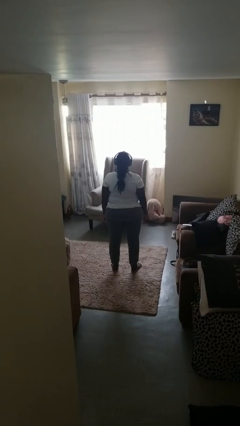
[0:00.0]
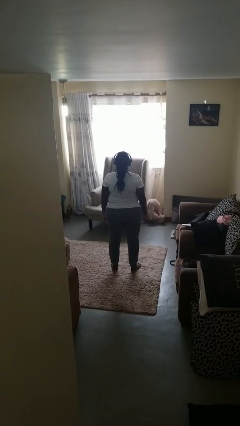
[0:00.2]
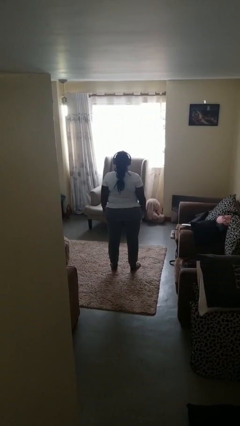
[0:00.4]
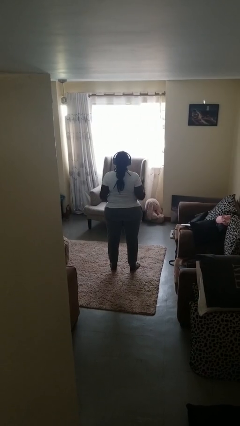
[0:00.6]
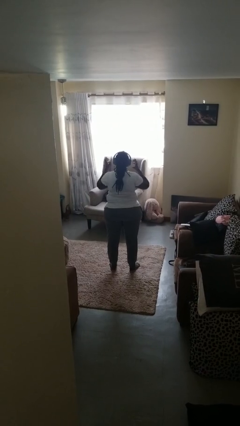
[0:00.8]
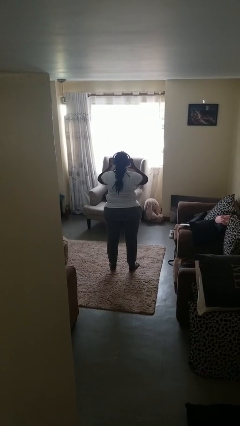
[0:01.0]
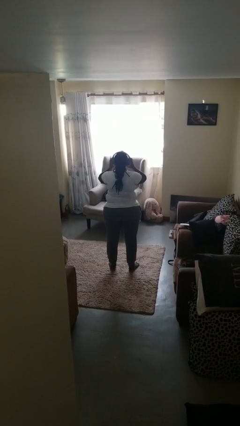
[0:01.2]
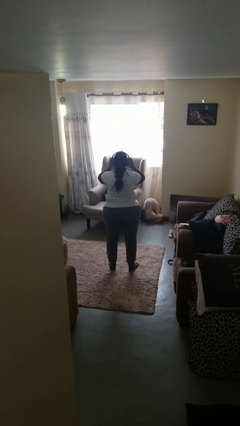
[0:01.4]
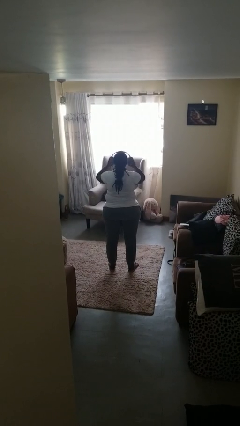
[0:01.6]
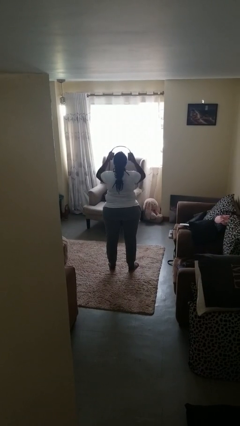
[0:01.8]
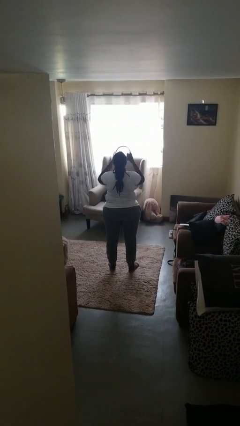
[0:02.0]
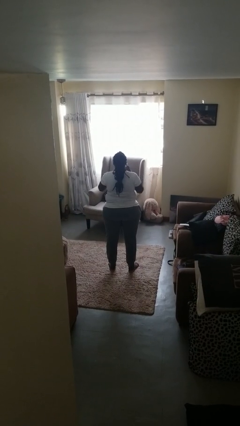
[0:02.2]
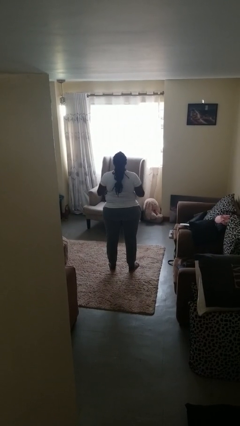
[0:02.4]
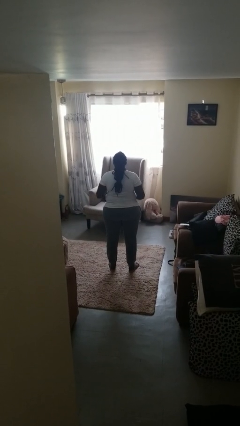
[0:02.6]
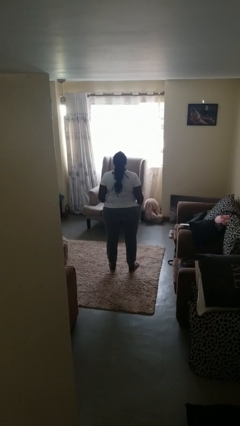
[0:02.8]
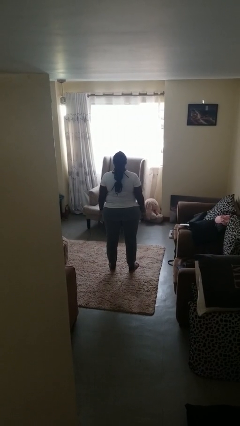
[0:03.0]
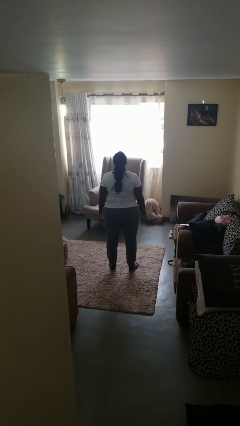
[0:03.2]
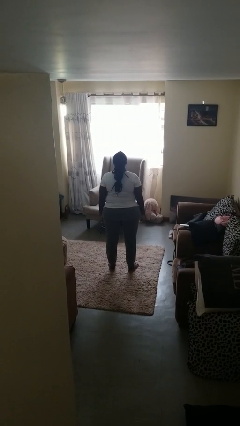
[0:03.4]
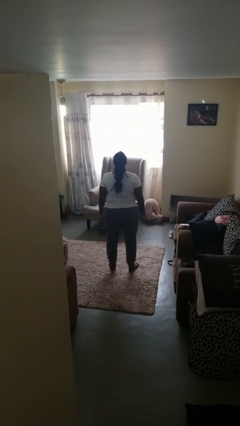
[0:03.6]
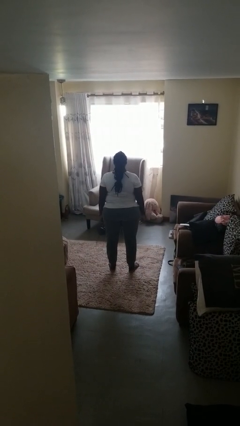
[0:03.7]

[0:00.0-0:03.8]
person takes off headphones

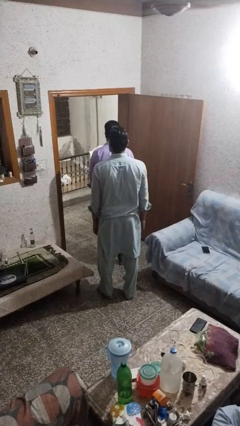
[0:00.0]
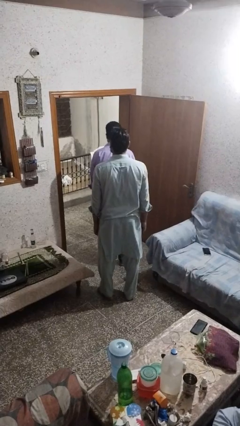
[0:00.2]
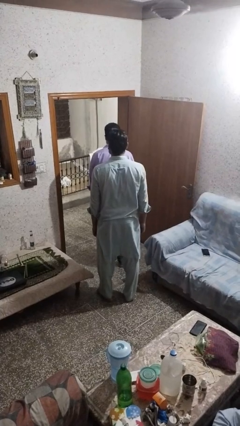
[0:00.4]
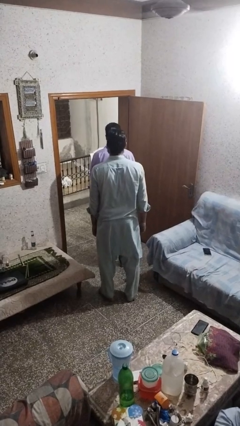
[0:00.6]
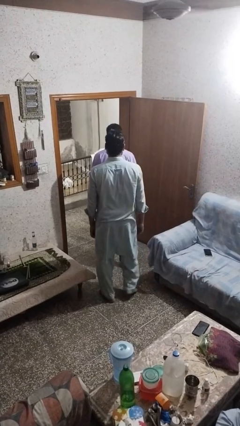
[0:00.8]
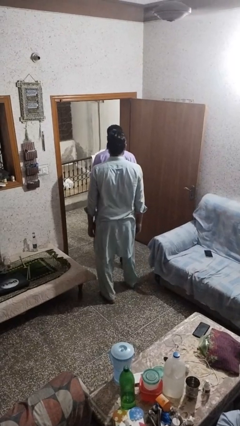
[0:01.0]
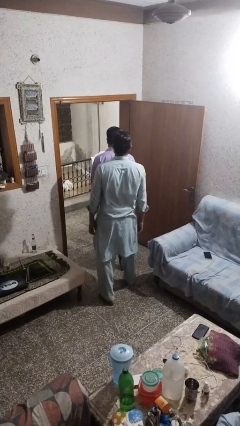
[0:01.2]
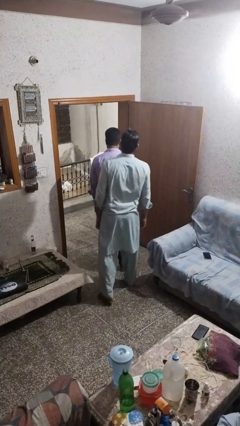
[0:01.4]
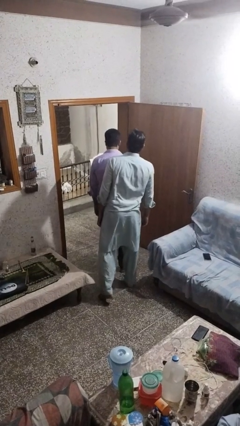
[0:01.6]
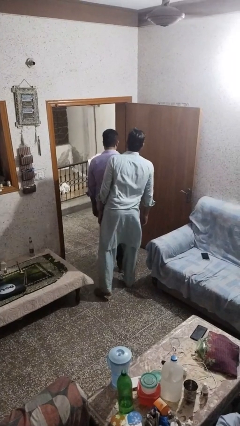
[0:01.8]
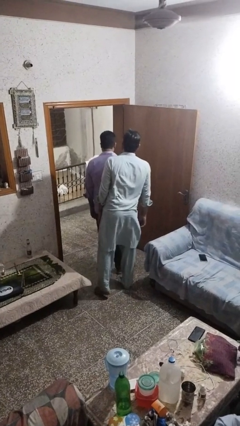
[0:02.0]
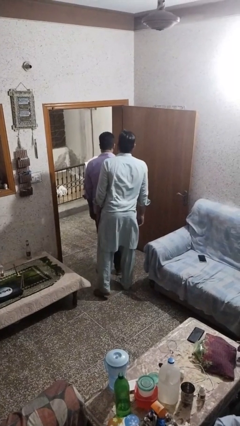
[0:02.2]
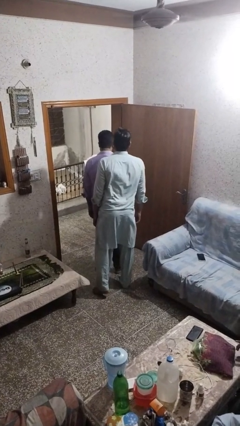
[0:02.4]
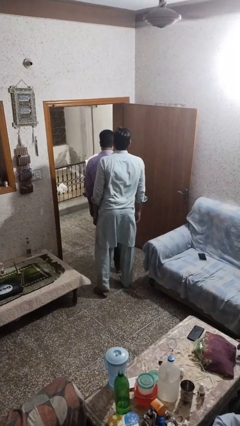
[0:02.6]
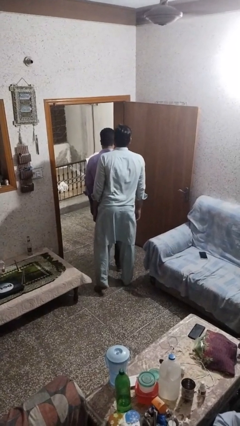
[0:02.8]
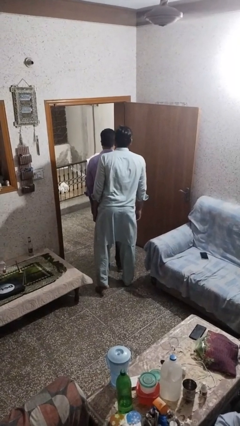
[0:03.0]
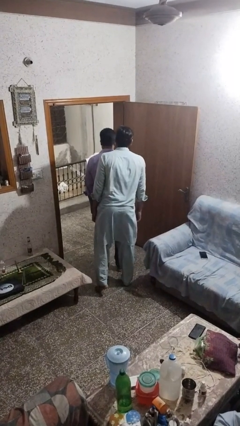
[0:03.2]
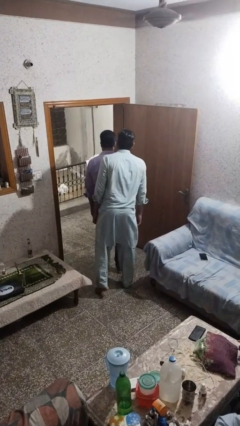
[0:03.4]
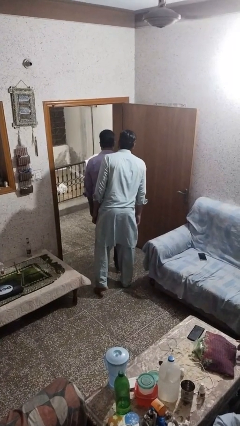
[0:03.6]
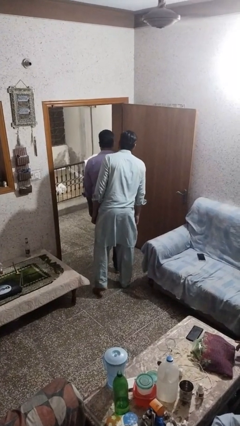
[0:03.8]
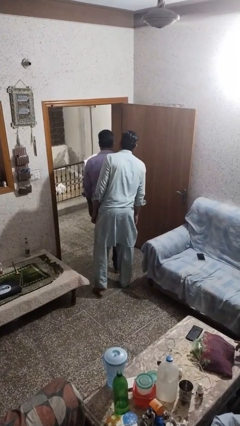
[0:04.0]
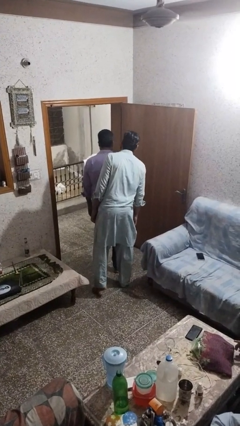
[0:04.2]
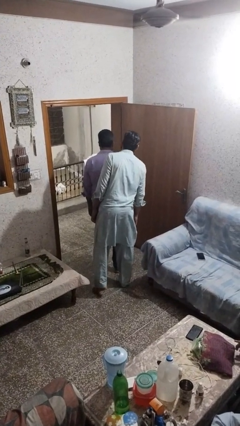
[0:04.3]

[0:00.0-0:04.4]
person looks over shoulder

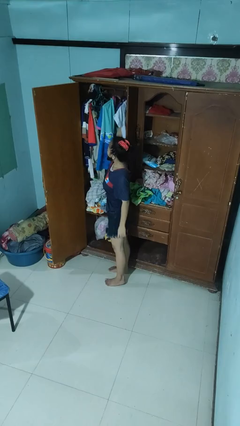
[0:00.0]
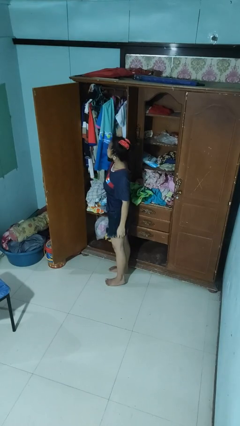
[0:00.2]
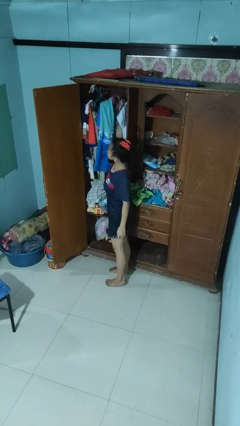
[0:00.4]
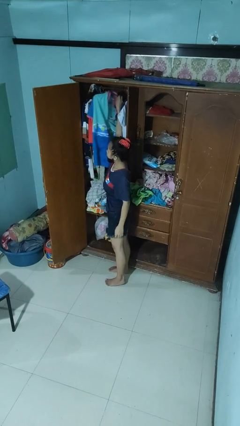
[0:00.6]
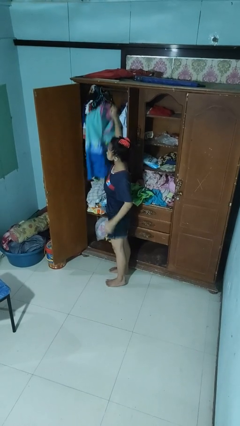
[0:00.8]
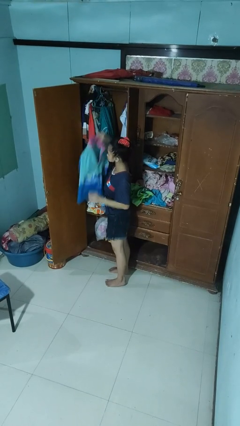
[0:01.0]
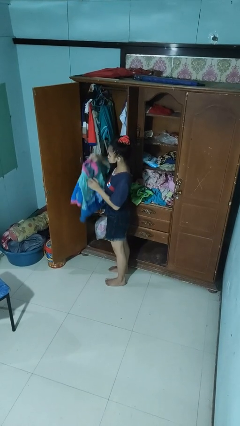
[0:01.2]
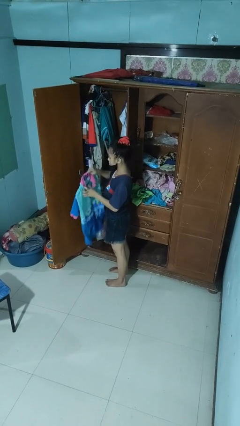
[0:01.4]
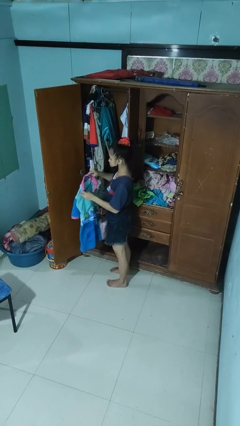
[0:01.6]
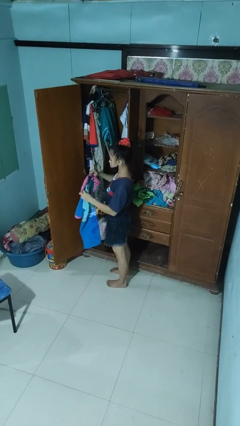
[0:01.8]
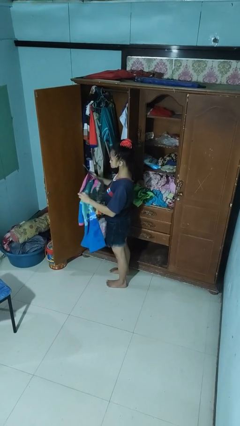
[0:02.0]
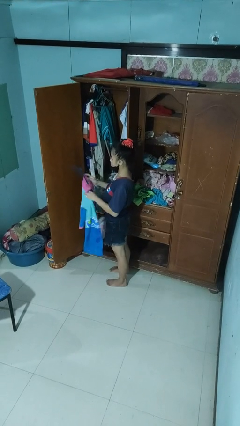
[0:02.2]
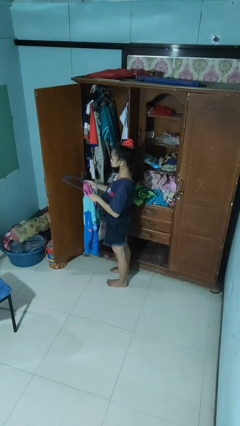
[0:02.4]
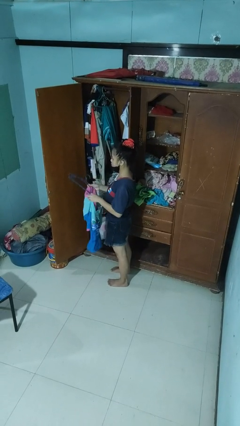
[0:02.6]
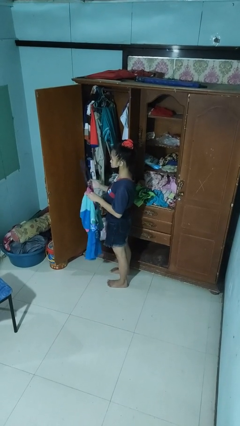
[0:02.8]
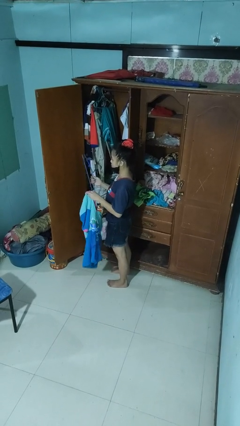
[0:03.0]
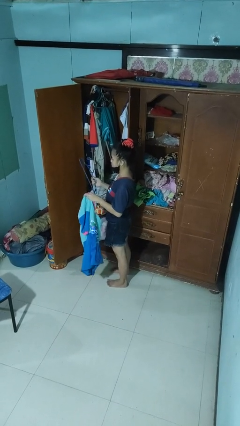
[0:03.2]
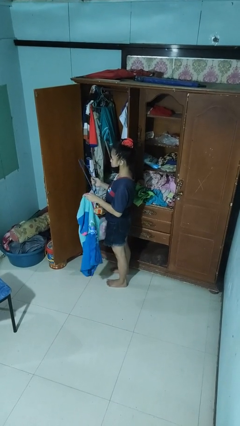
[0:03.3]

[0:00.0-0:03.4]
person takes clothes from closet

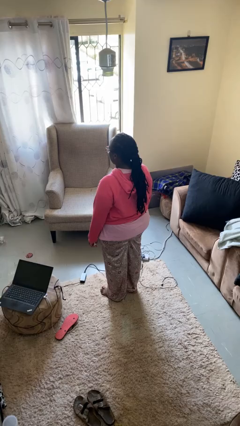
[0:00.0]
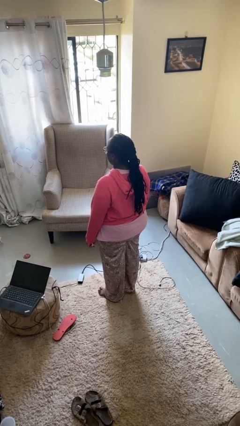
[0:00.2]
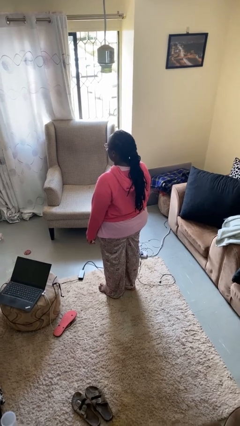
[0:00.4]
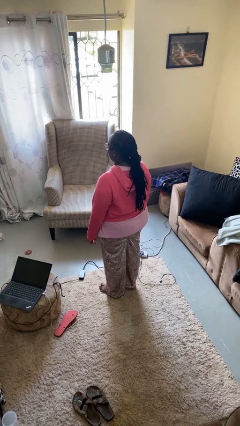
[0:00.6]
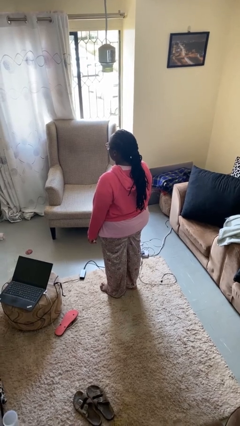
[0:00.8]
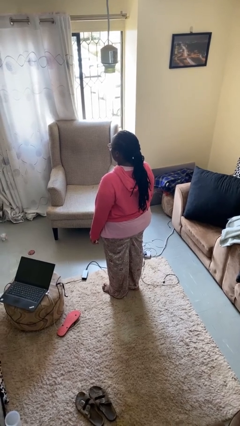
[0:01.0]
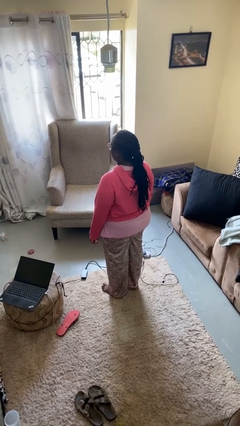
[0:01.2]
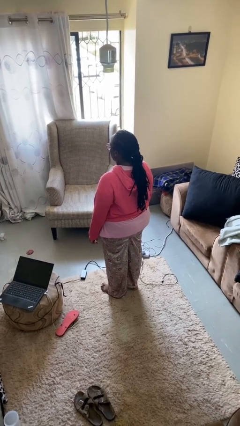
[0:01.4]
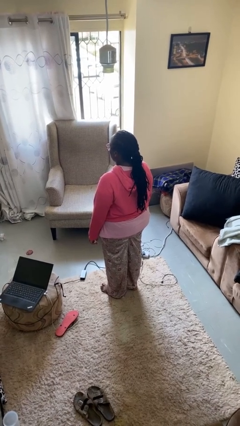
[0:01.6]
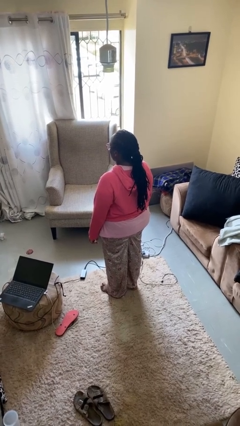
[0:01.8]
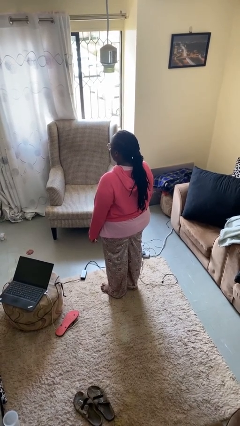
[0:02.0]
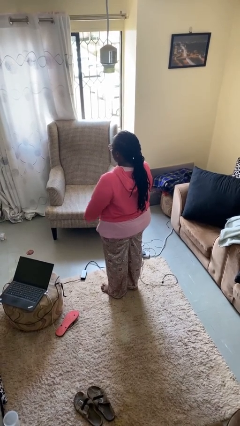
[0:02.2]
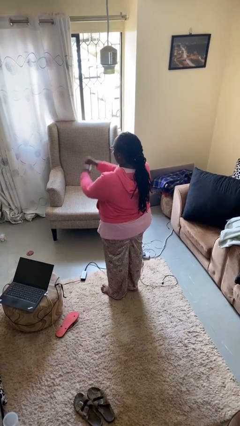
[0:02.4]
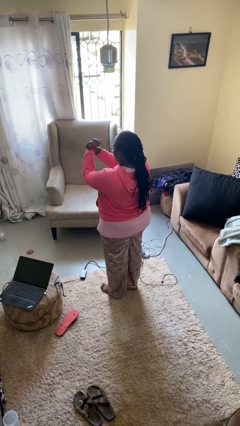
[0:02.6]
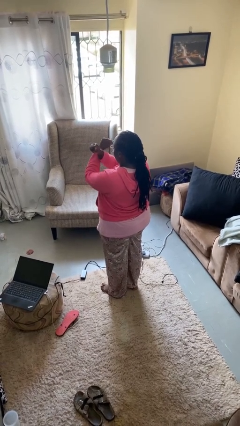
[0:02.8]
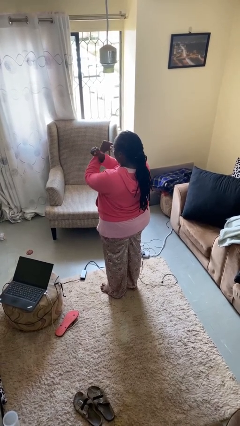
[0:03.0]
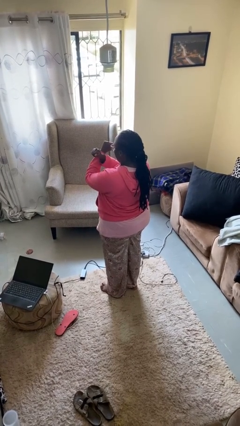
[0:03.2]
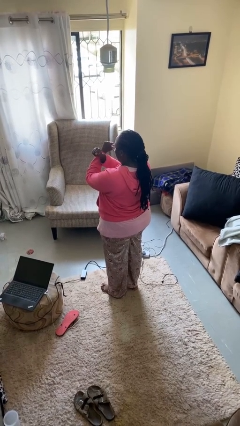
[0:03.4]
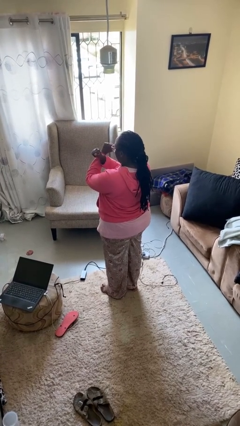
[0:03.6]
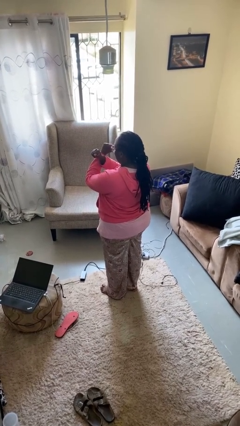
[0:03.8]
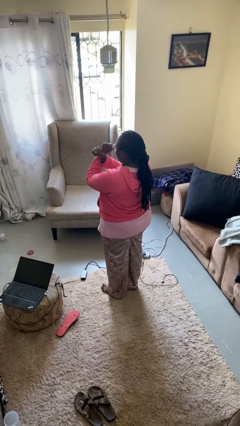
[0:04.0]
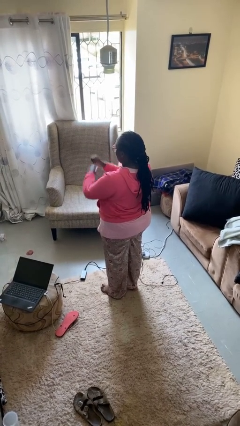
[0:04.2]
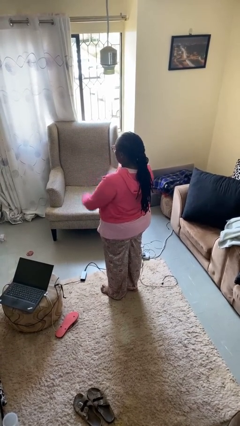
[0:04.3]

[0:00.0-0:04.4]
person gestures arms x

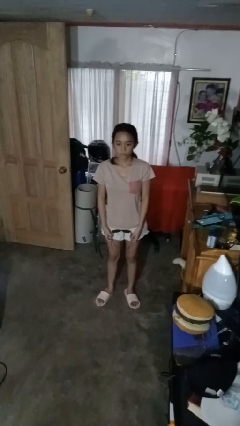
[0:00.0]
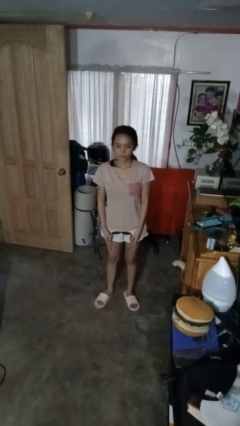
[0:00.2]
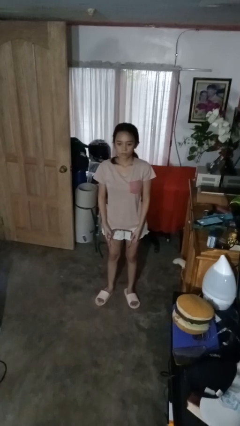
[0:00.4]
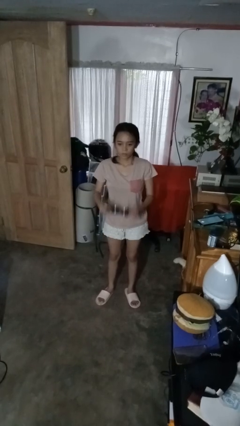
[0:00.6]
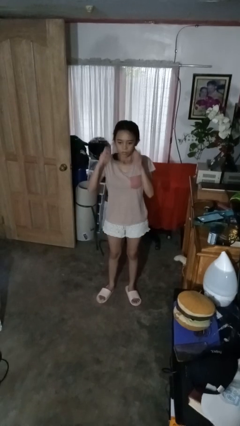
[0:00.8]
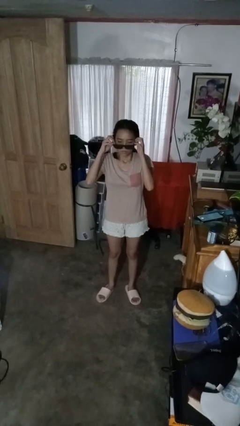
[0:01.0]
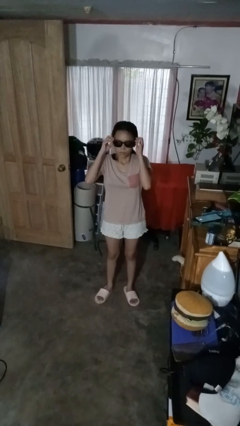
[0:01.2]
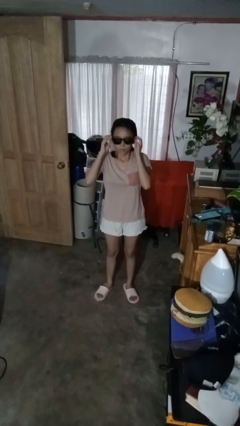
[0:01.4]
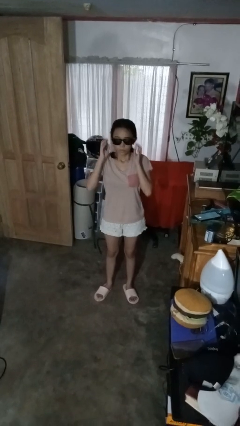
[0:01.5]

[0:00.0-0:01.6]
person puts on sunglasses
